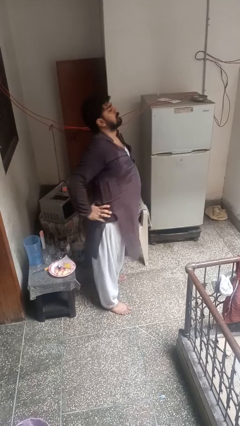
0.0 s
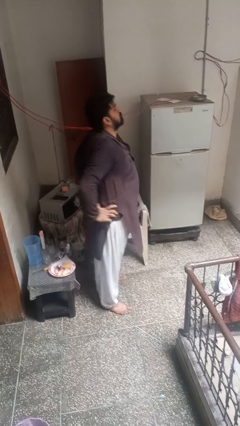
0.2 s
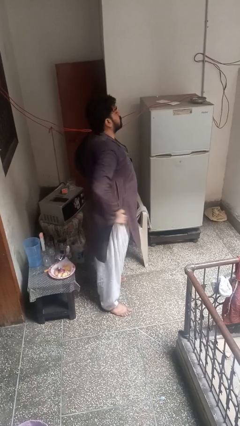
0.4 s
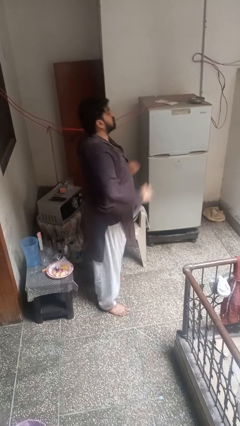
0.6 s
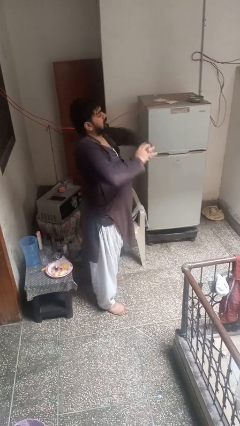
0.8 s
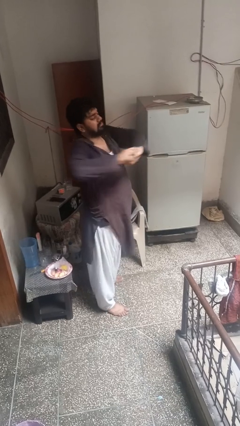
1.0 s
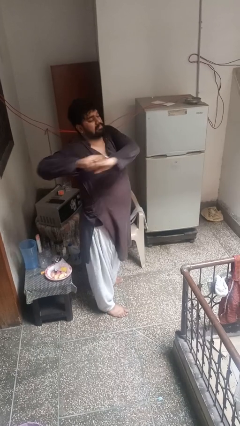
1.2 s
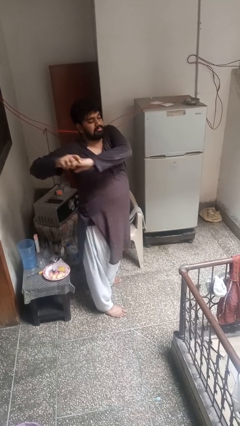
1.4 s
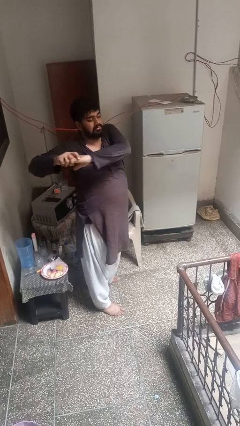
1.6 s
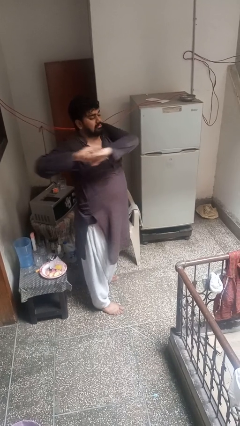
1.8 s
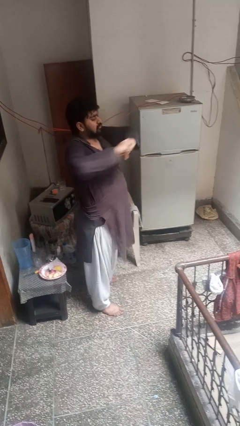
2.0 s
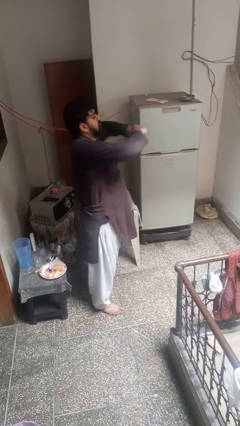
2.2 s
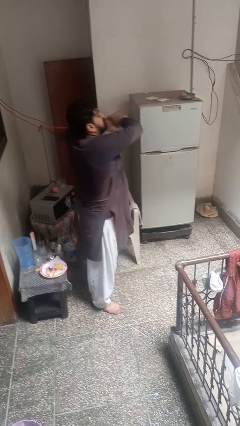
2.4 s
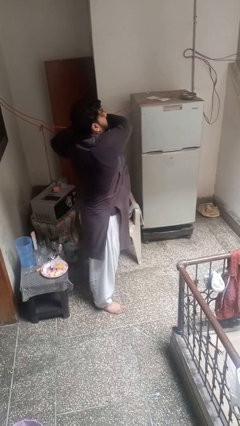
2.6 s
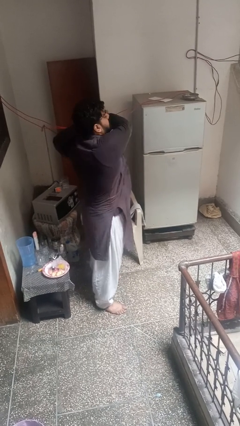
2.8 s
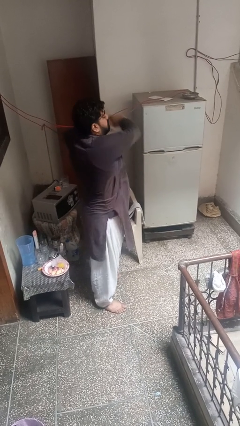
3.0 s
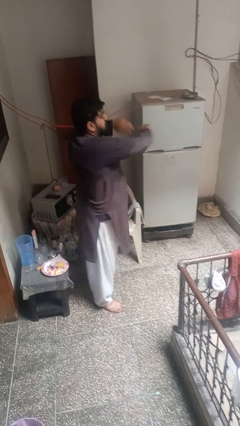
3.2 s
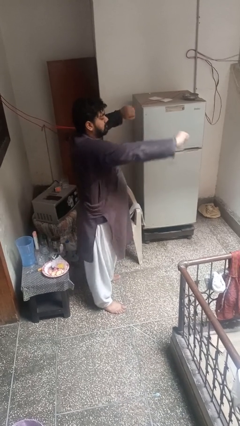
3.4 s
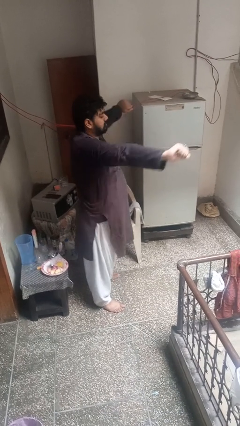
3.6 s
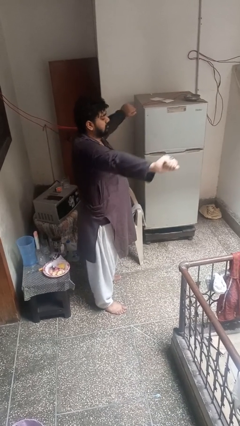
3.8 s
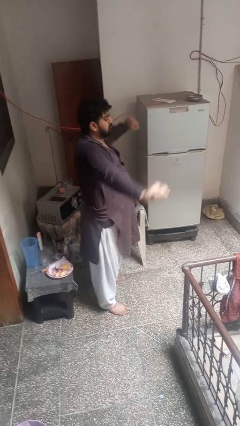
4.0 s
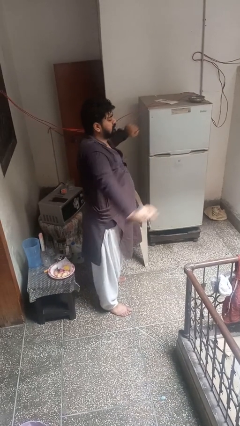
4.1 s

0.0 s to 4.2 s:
person stretches arms to side

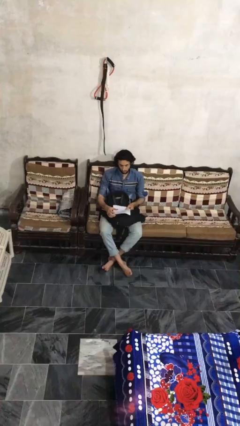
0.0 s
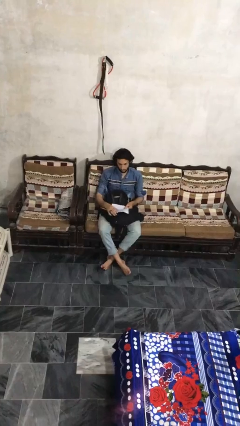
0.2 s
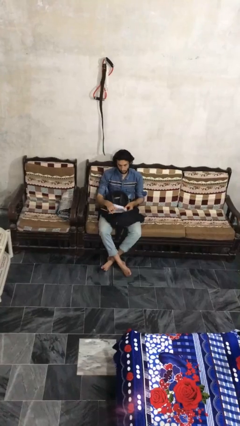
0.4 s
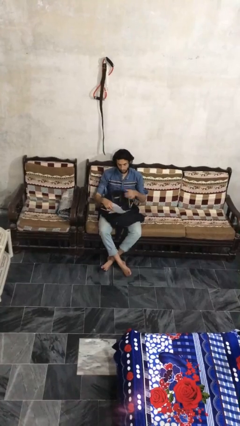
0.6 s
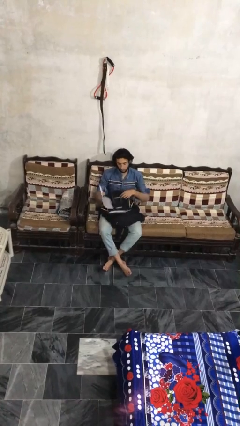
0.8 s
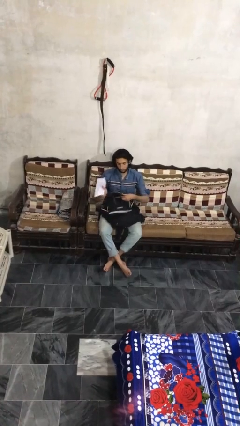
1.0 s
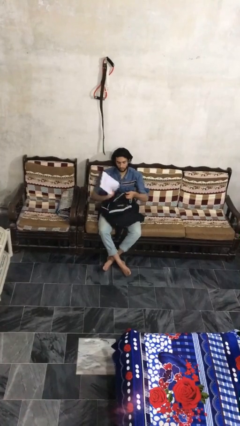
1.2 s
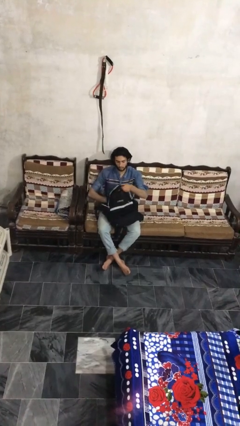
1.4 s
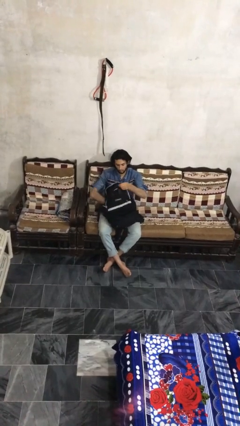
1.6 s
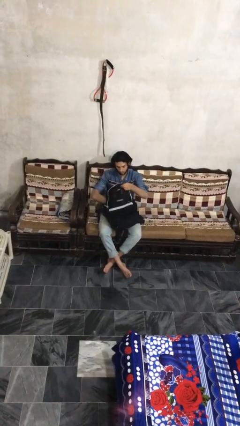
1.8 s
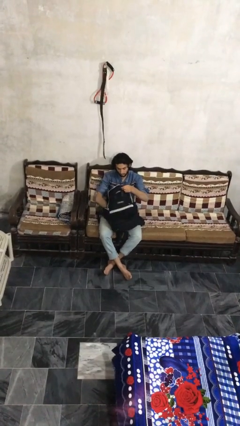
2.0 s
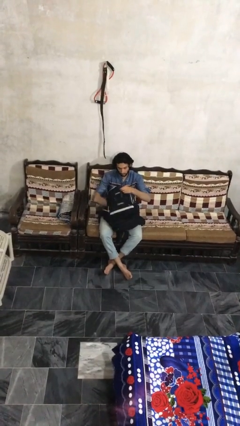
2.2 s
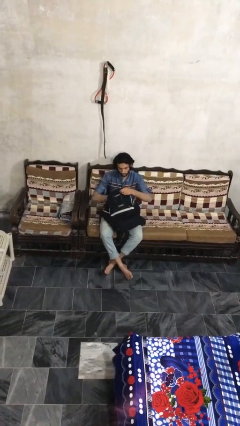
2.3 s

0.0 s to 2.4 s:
person puts object into backpack

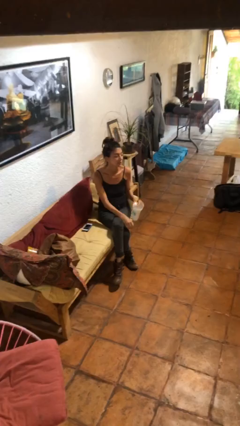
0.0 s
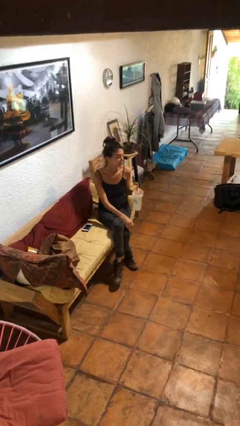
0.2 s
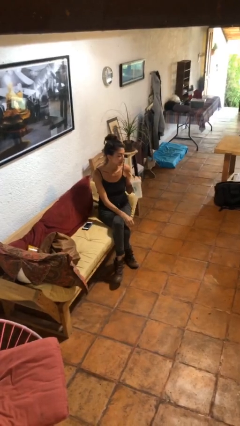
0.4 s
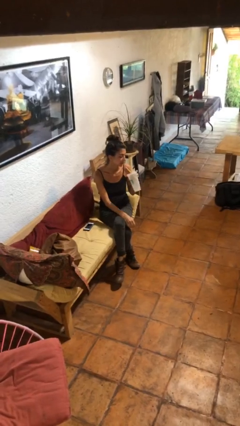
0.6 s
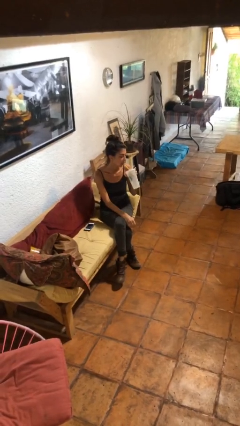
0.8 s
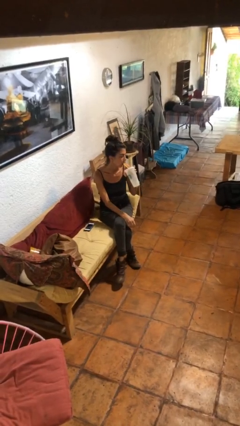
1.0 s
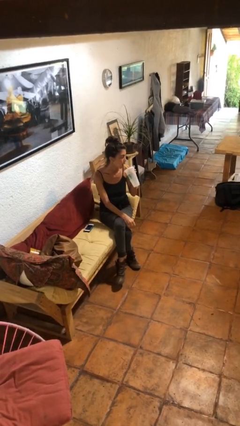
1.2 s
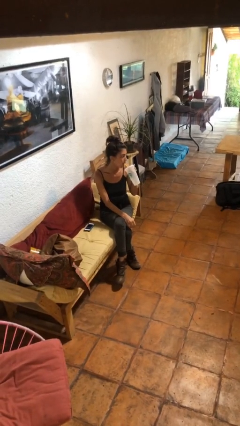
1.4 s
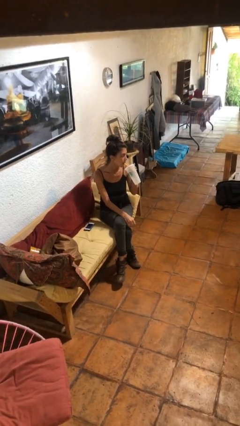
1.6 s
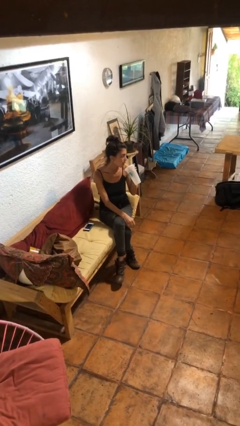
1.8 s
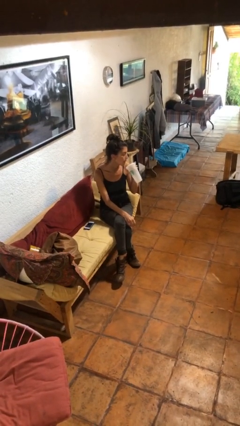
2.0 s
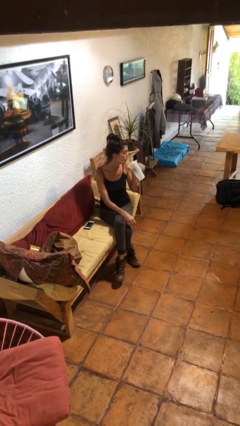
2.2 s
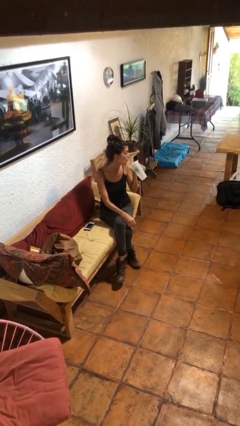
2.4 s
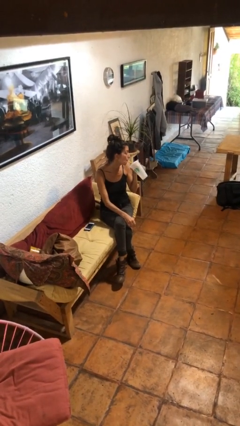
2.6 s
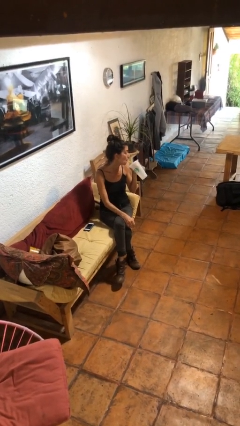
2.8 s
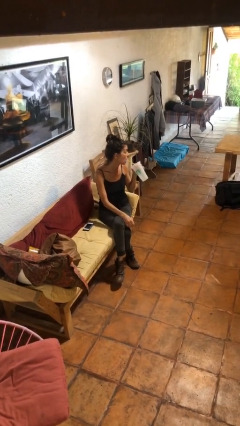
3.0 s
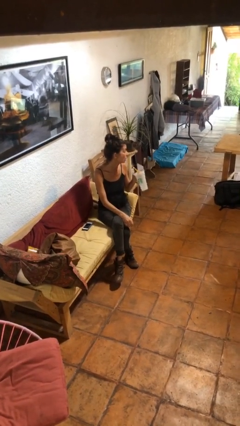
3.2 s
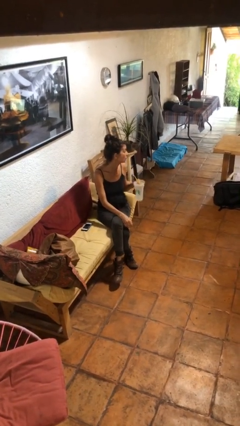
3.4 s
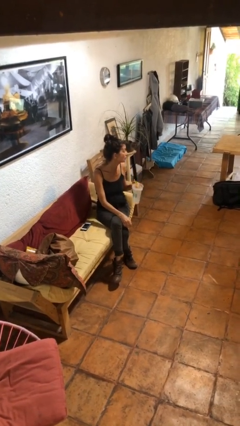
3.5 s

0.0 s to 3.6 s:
person drinks from straw

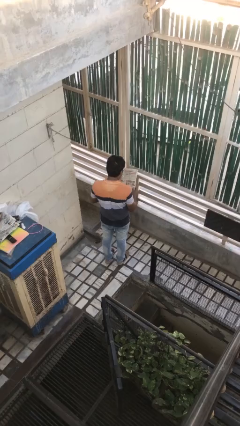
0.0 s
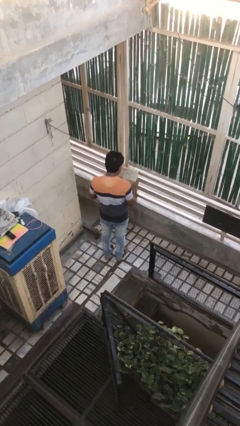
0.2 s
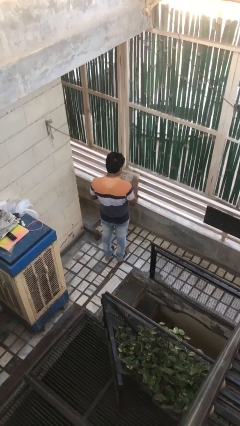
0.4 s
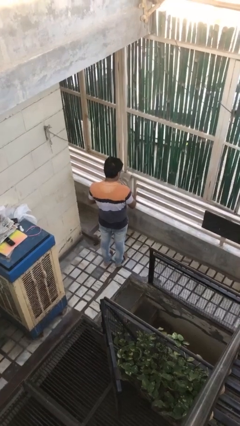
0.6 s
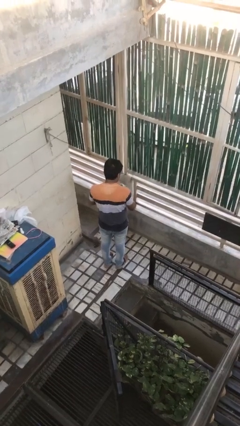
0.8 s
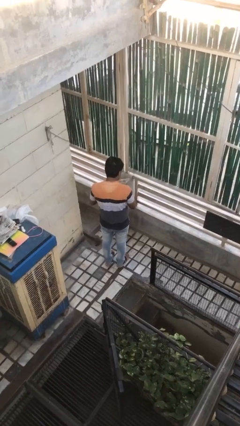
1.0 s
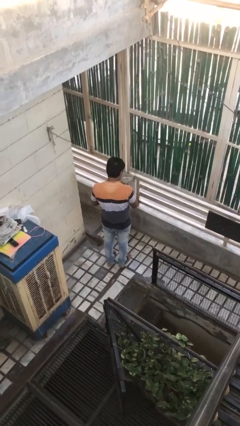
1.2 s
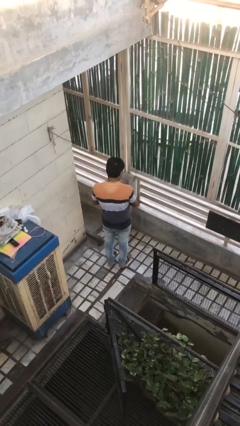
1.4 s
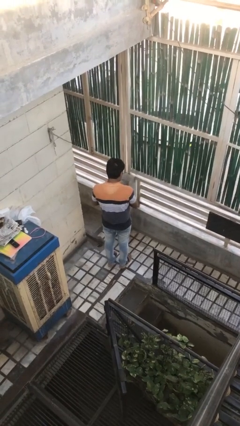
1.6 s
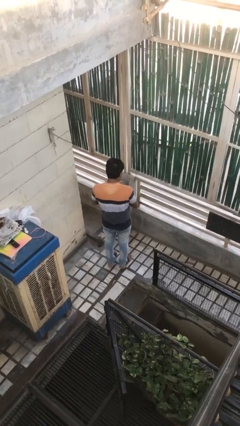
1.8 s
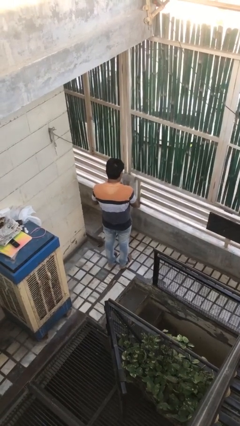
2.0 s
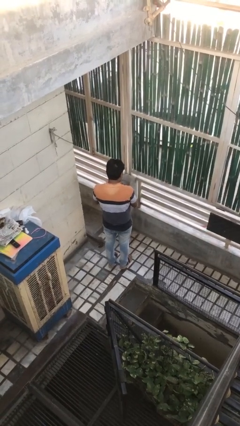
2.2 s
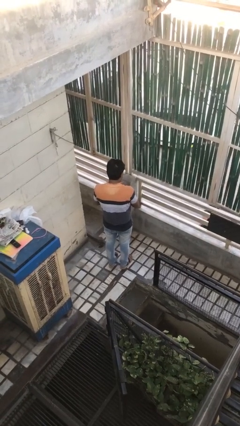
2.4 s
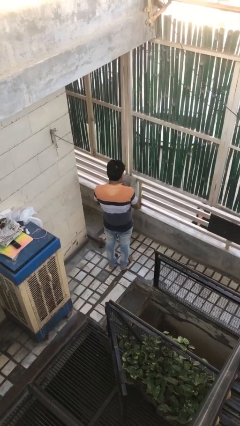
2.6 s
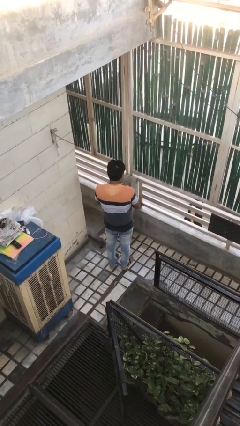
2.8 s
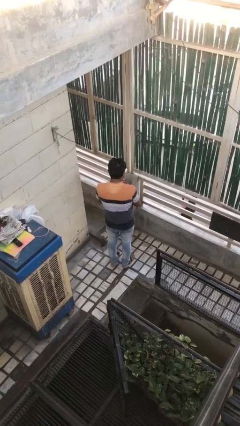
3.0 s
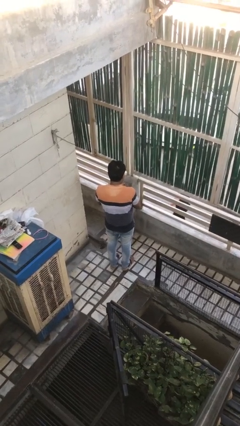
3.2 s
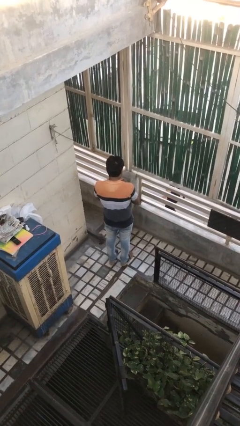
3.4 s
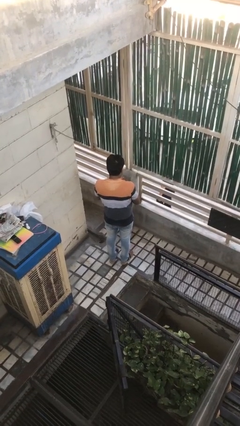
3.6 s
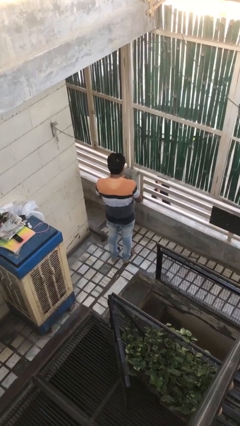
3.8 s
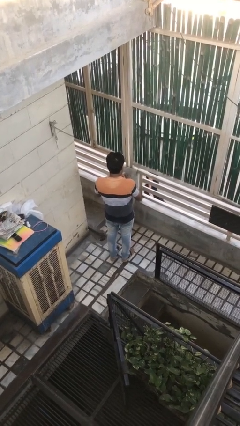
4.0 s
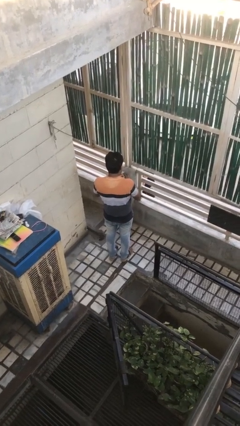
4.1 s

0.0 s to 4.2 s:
person crumples paper

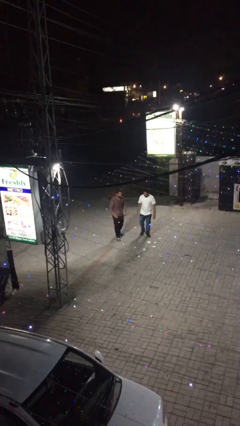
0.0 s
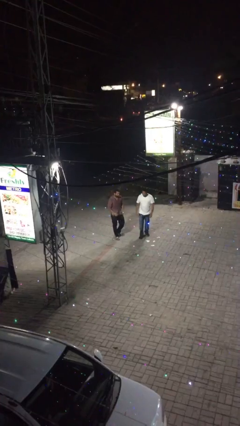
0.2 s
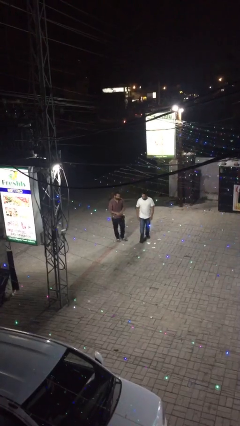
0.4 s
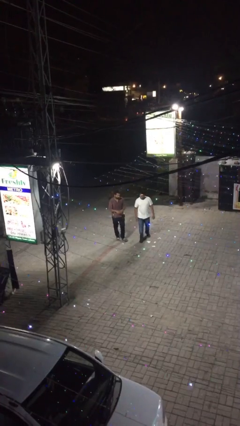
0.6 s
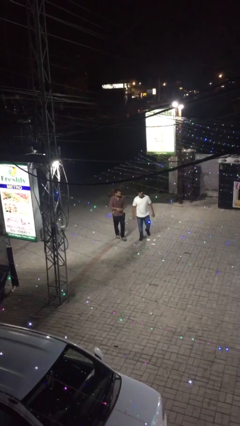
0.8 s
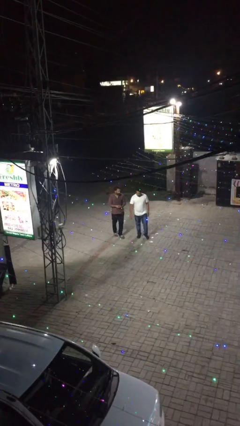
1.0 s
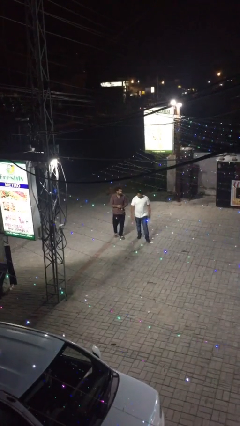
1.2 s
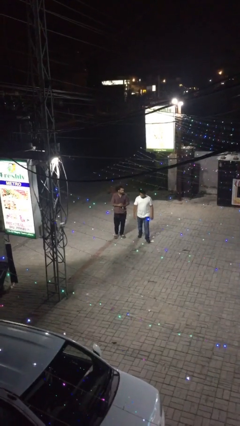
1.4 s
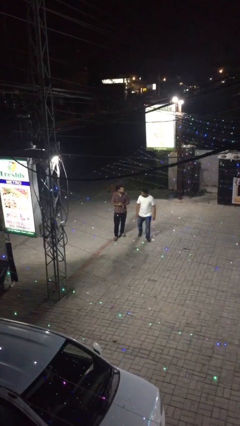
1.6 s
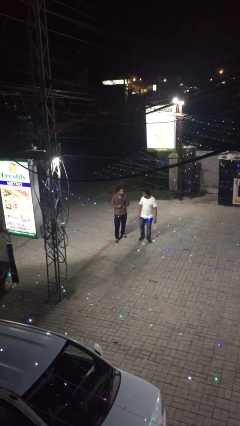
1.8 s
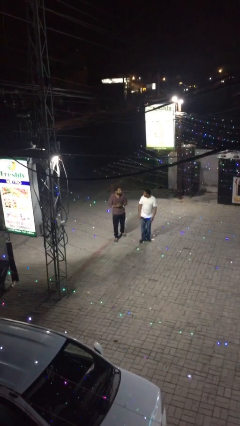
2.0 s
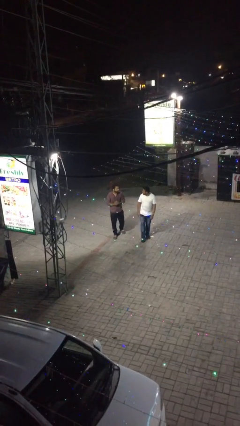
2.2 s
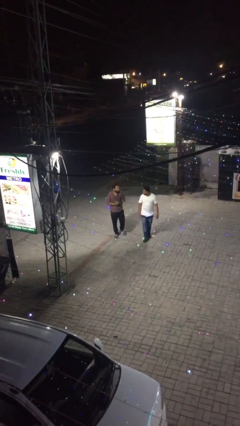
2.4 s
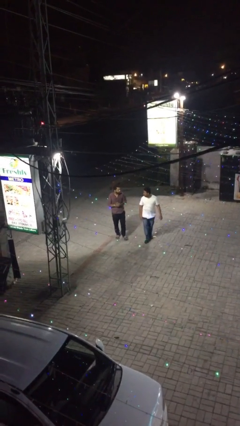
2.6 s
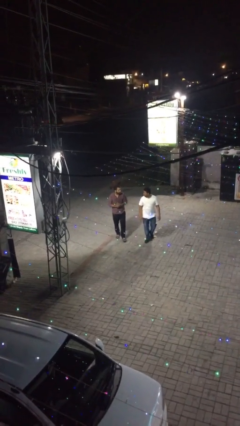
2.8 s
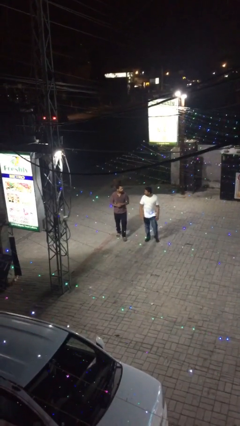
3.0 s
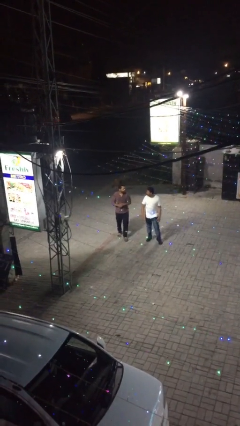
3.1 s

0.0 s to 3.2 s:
person talks to person

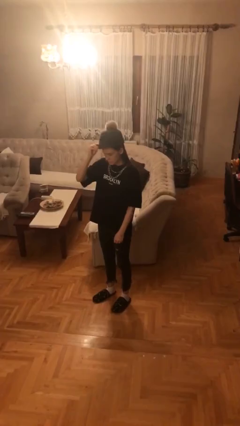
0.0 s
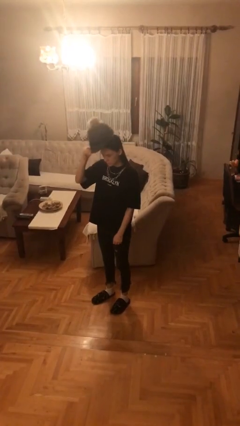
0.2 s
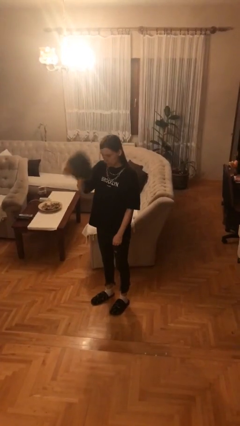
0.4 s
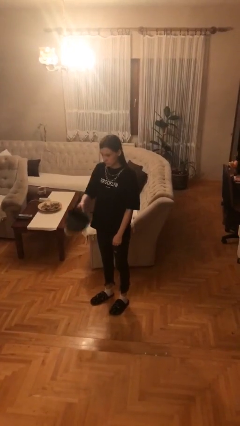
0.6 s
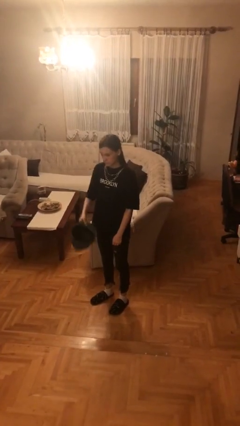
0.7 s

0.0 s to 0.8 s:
person takes off hat
